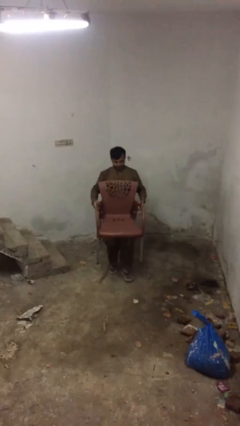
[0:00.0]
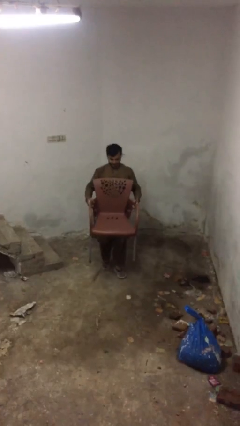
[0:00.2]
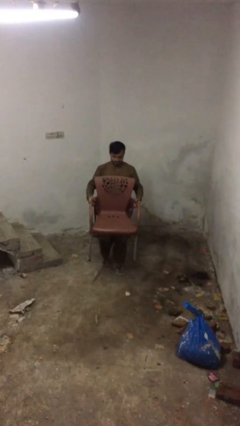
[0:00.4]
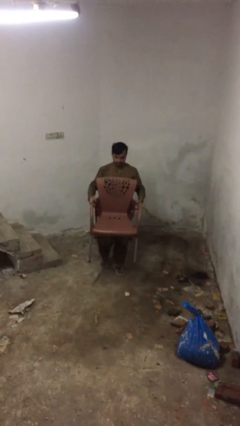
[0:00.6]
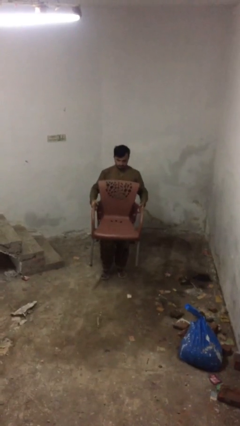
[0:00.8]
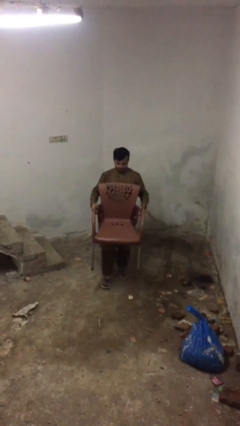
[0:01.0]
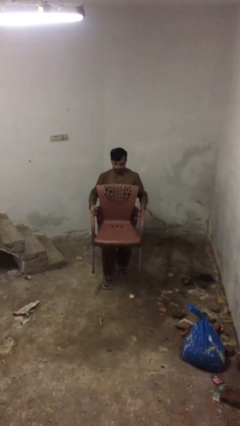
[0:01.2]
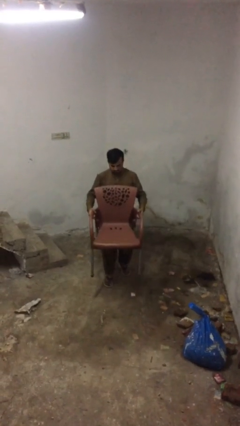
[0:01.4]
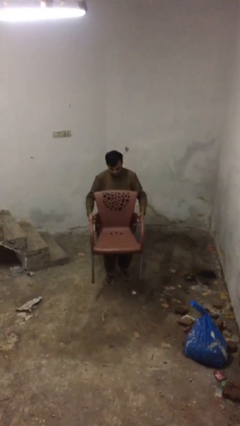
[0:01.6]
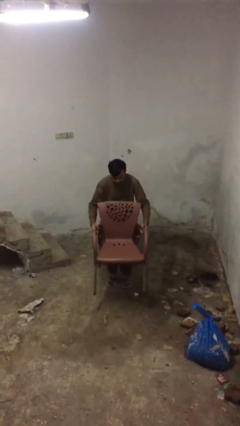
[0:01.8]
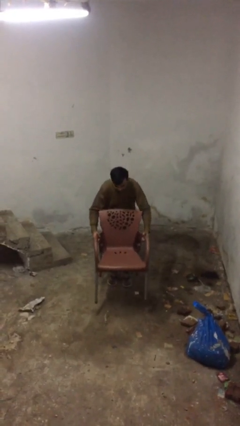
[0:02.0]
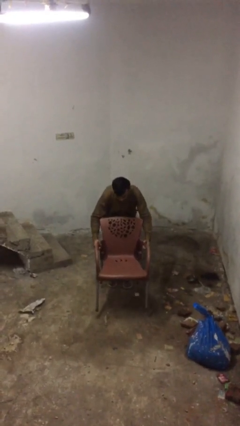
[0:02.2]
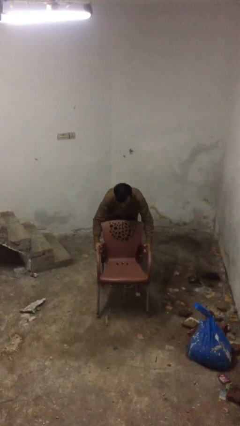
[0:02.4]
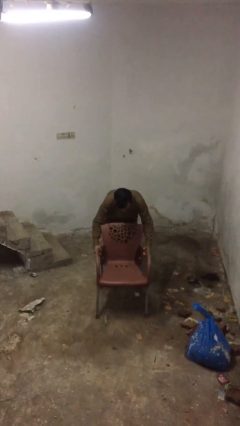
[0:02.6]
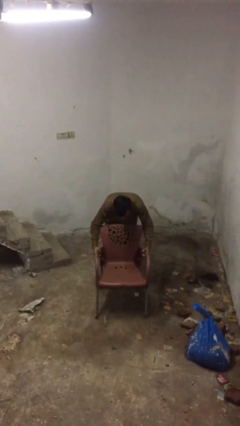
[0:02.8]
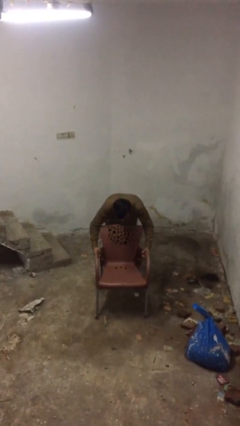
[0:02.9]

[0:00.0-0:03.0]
person puts down object on floor

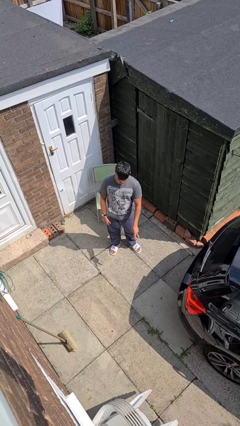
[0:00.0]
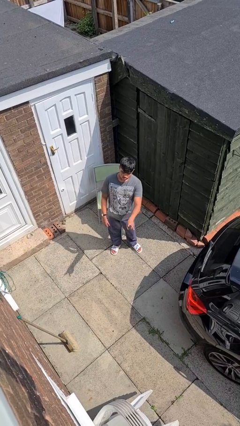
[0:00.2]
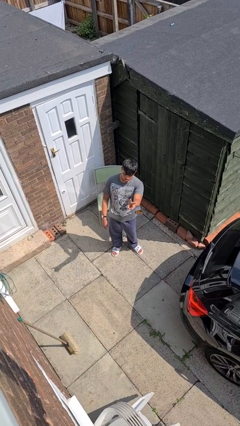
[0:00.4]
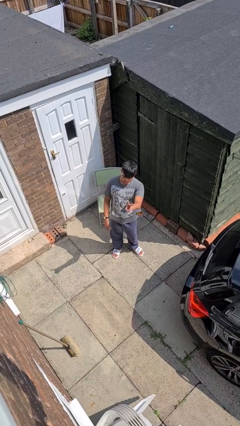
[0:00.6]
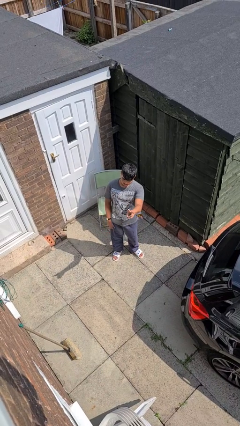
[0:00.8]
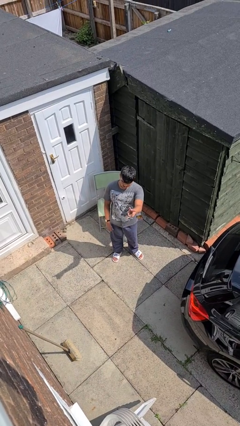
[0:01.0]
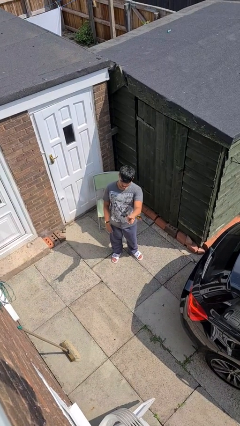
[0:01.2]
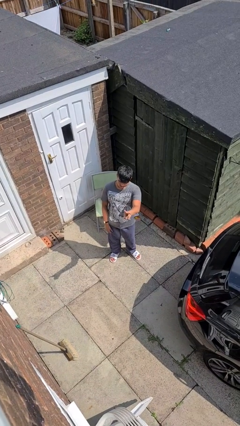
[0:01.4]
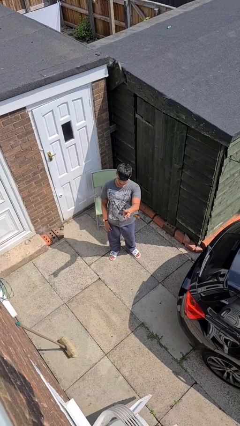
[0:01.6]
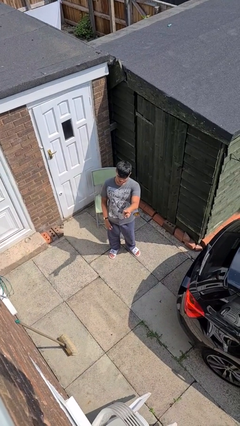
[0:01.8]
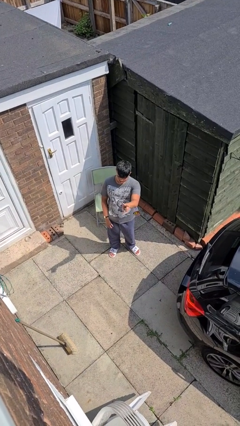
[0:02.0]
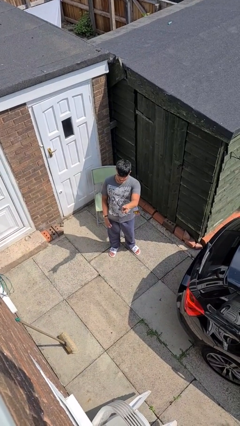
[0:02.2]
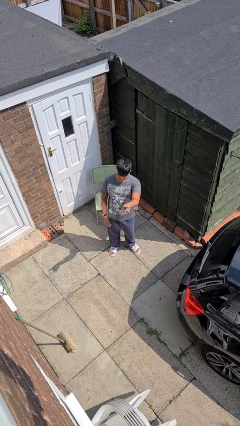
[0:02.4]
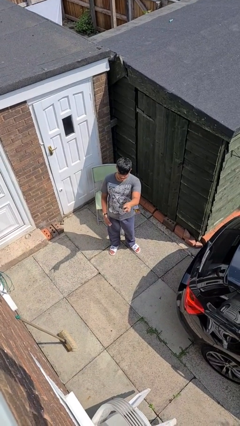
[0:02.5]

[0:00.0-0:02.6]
person gestures peace

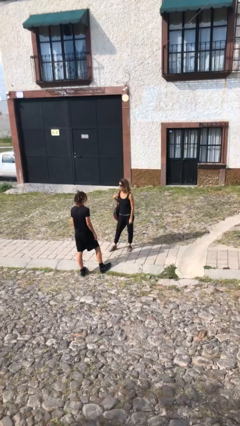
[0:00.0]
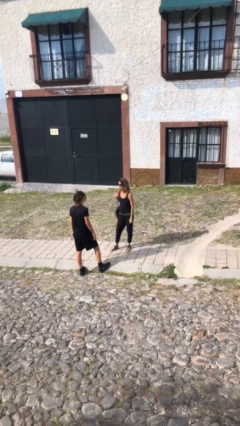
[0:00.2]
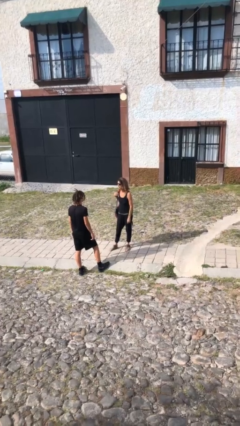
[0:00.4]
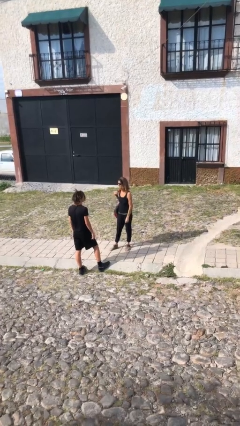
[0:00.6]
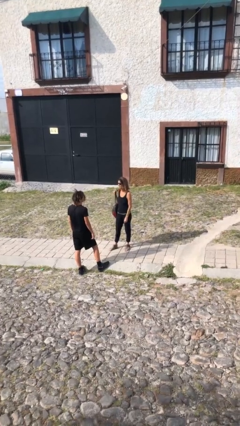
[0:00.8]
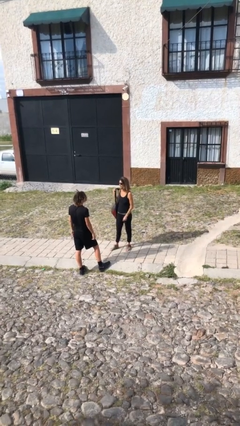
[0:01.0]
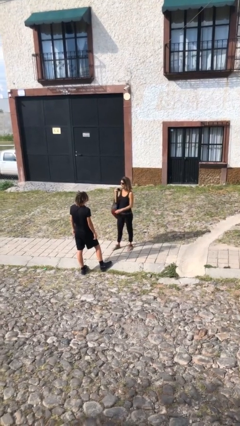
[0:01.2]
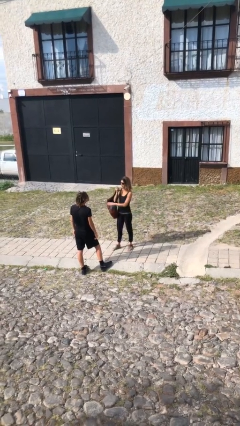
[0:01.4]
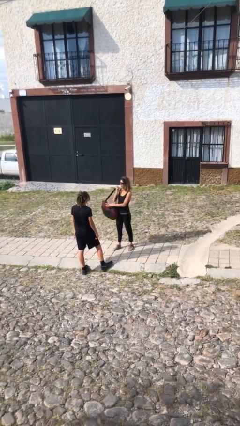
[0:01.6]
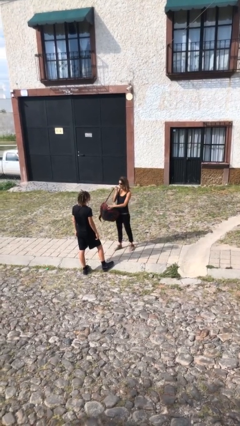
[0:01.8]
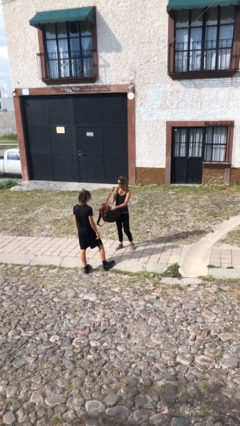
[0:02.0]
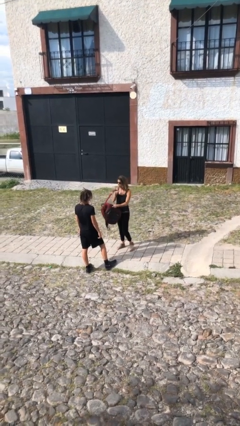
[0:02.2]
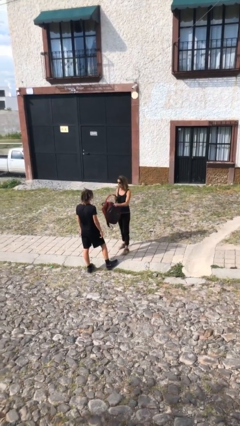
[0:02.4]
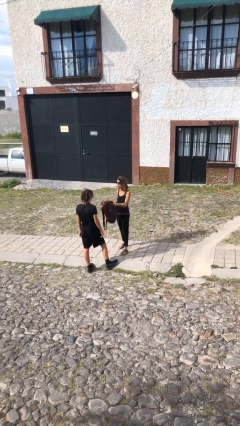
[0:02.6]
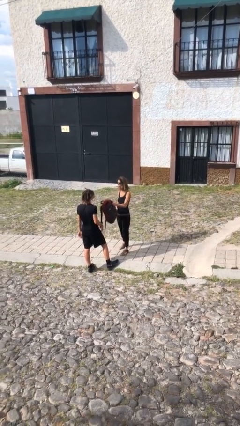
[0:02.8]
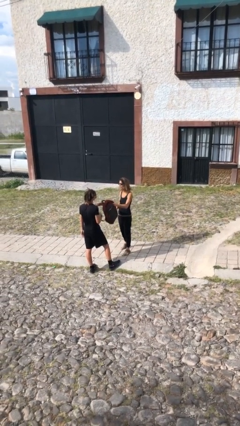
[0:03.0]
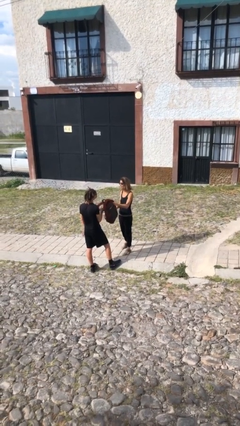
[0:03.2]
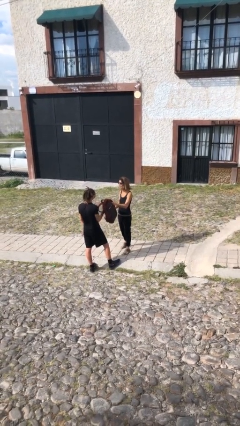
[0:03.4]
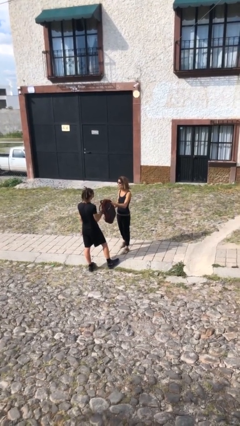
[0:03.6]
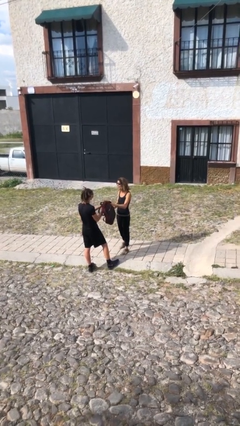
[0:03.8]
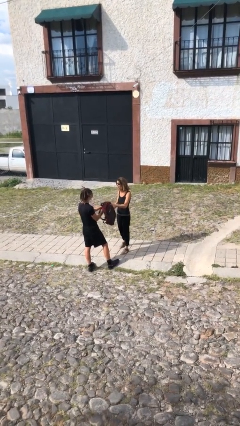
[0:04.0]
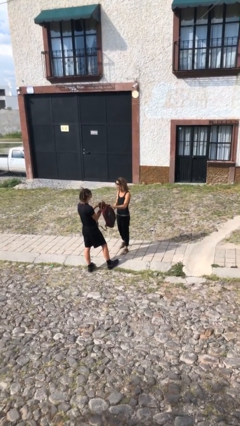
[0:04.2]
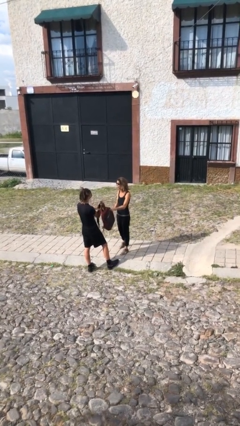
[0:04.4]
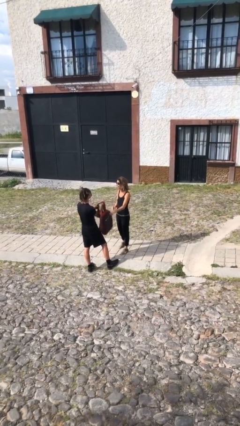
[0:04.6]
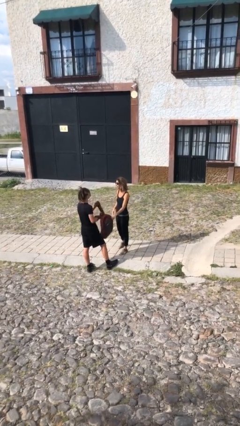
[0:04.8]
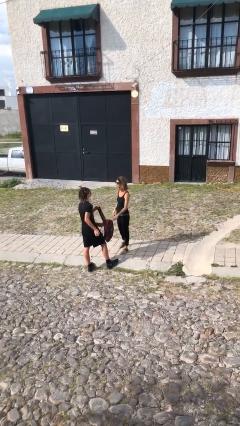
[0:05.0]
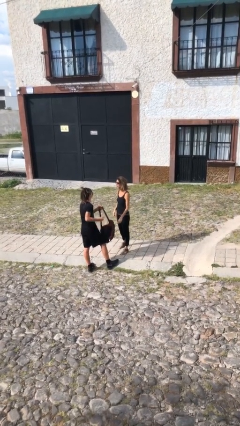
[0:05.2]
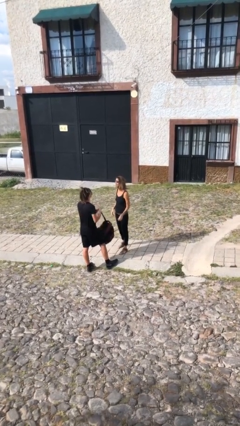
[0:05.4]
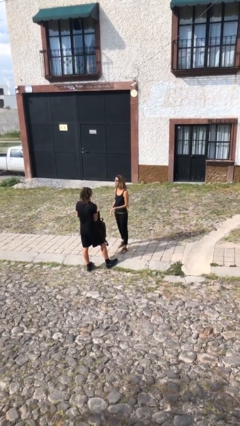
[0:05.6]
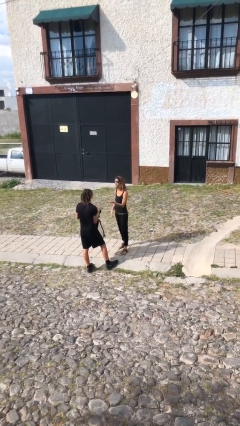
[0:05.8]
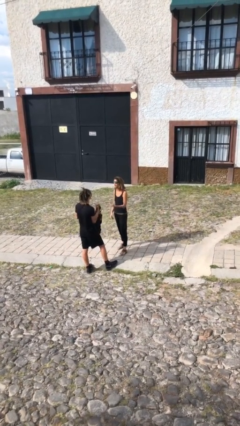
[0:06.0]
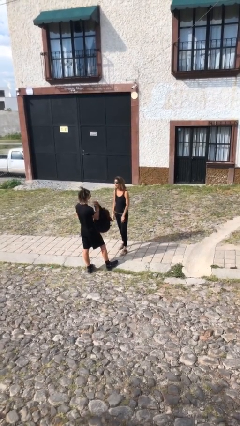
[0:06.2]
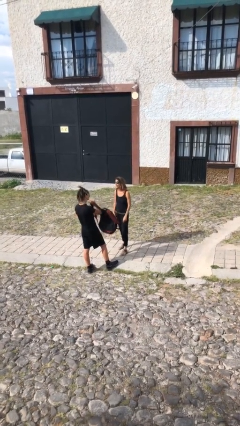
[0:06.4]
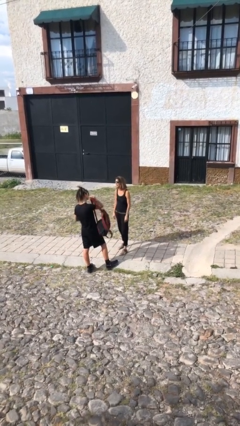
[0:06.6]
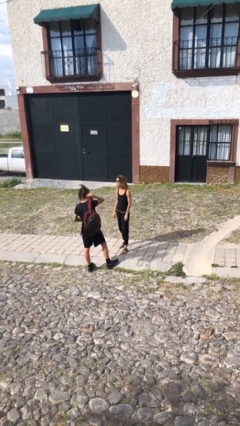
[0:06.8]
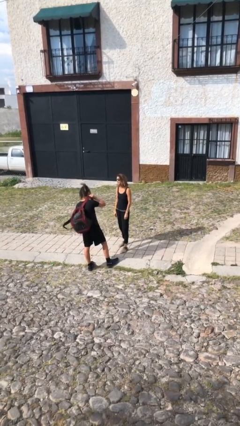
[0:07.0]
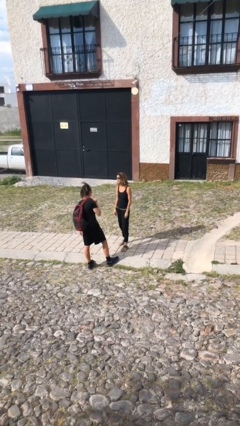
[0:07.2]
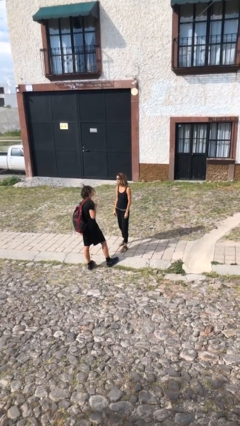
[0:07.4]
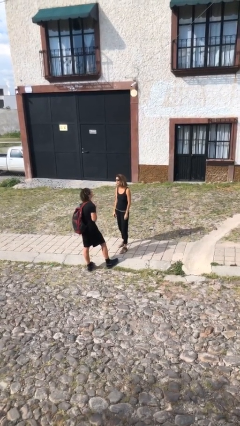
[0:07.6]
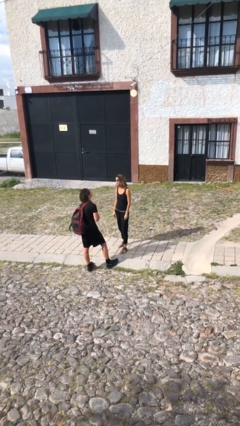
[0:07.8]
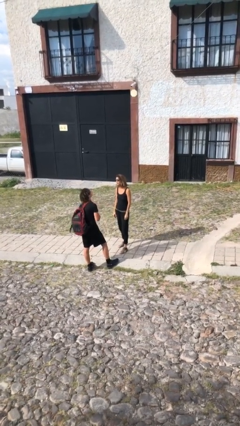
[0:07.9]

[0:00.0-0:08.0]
person transfers object to person

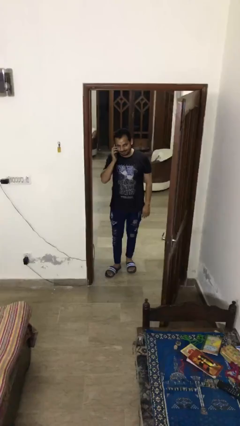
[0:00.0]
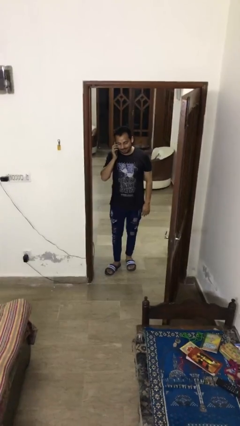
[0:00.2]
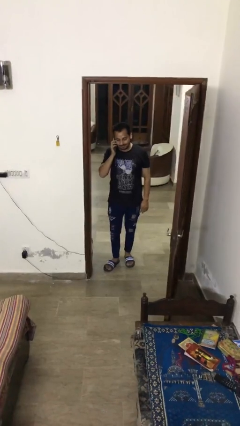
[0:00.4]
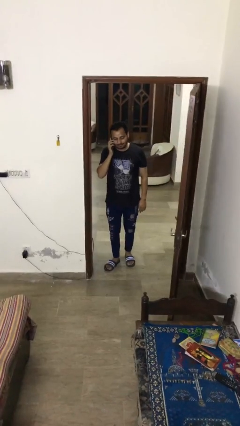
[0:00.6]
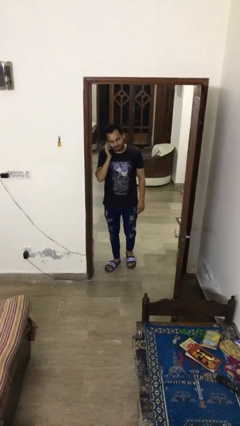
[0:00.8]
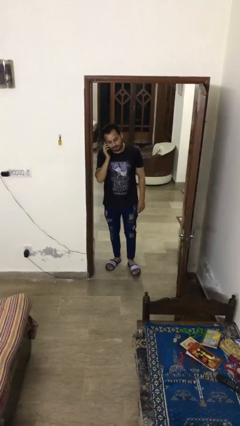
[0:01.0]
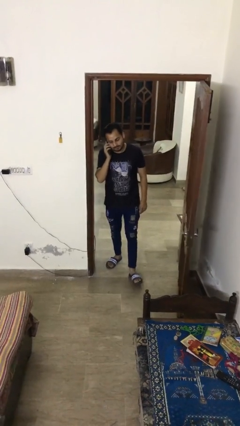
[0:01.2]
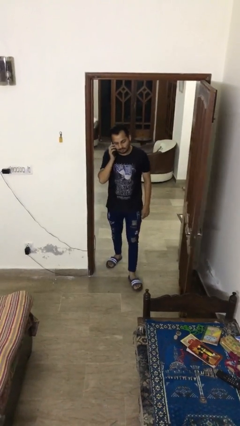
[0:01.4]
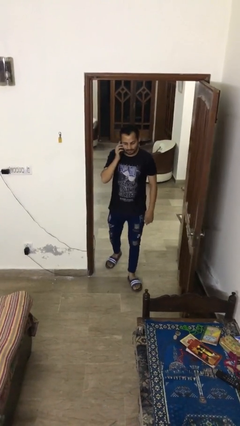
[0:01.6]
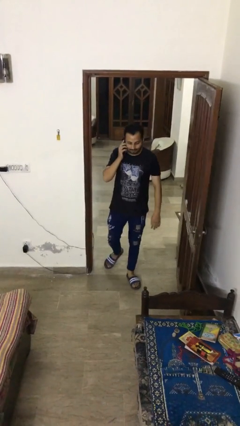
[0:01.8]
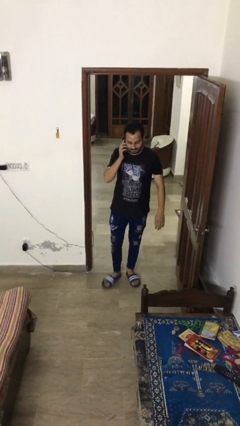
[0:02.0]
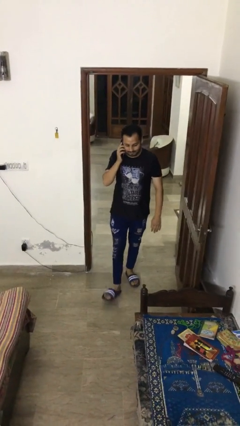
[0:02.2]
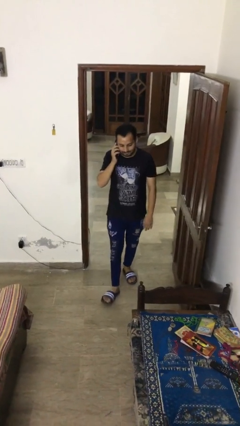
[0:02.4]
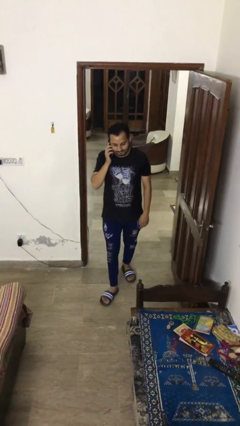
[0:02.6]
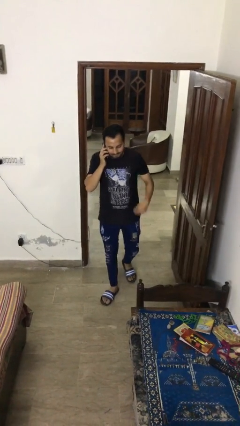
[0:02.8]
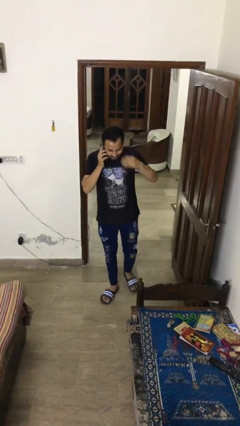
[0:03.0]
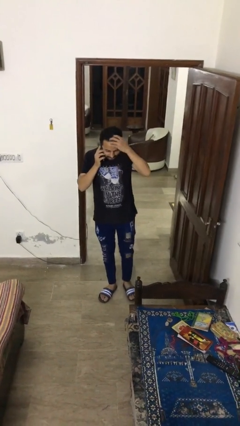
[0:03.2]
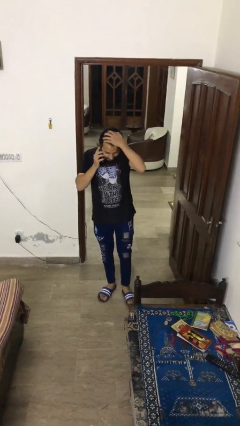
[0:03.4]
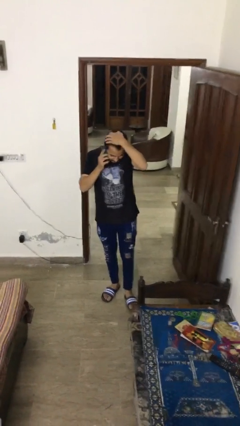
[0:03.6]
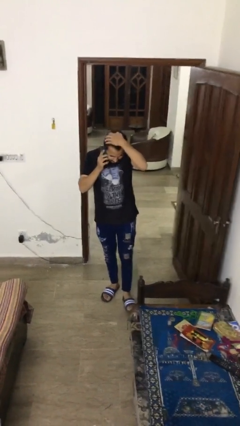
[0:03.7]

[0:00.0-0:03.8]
person enters scene through structure

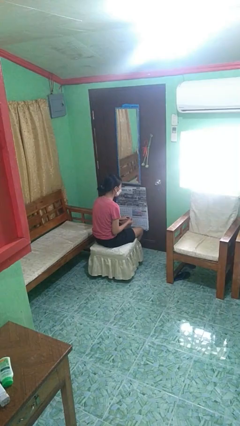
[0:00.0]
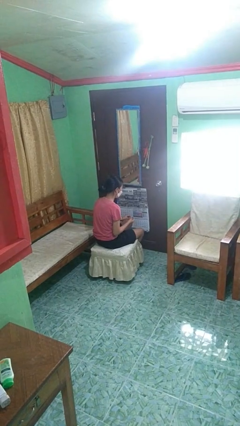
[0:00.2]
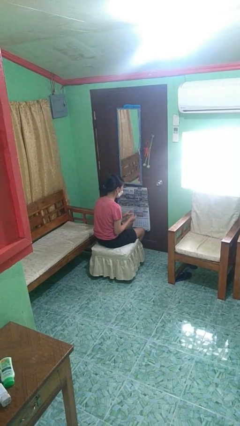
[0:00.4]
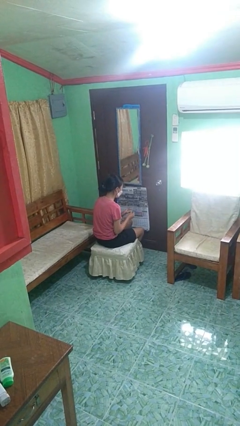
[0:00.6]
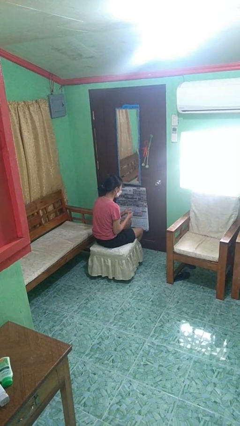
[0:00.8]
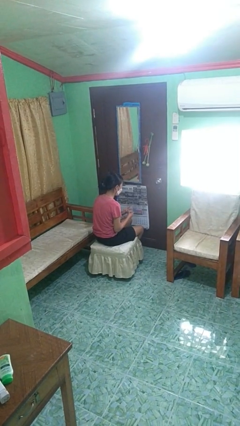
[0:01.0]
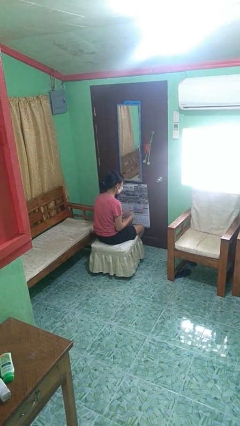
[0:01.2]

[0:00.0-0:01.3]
person puts on ring
